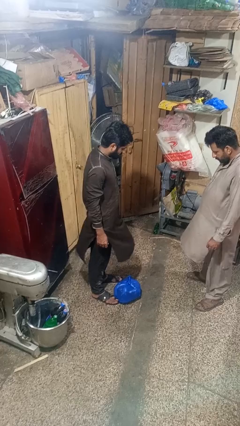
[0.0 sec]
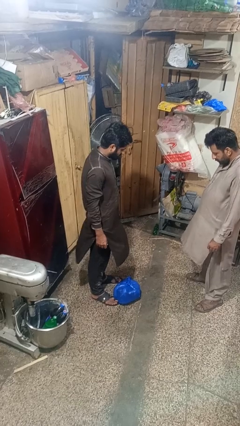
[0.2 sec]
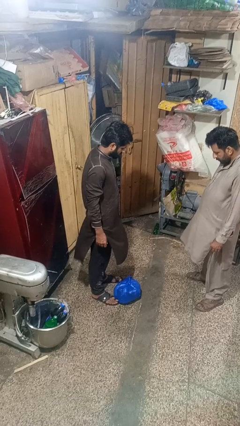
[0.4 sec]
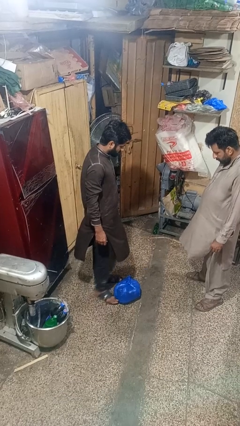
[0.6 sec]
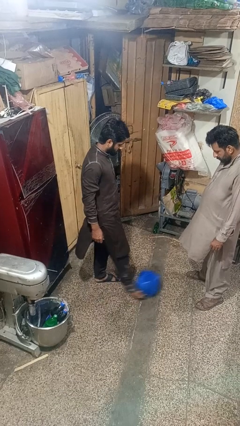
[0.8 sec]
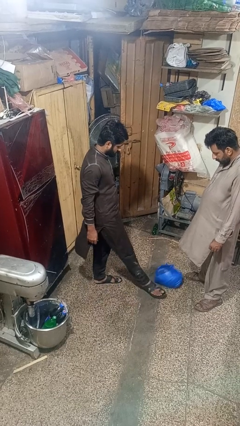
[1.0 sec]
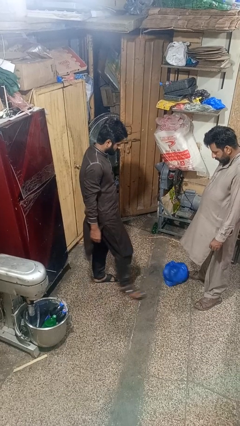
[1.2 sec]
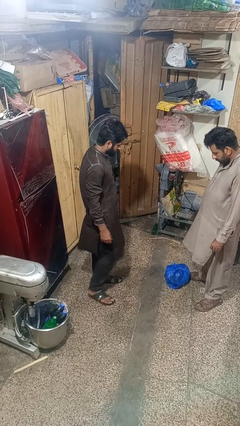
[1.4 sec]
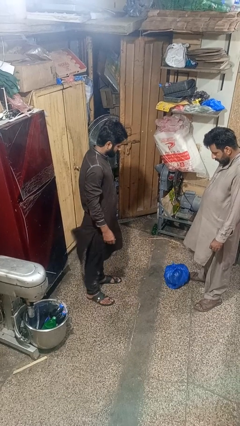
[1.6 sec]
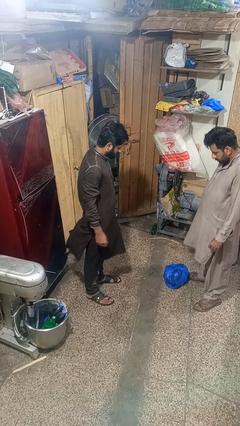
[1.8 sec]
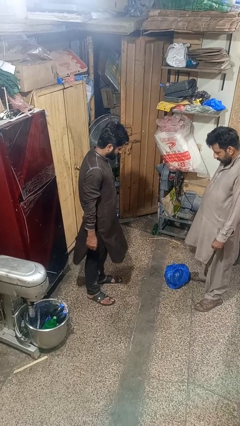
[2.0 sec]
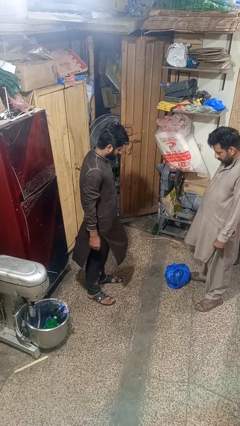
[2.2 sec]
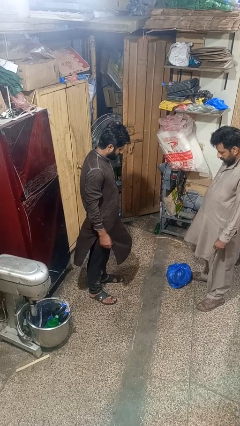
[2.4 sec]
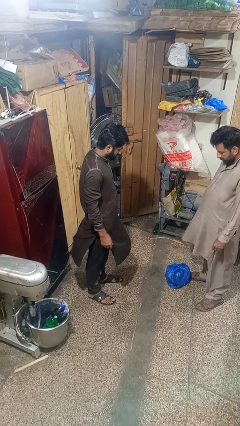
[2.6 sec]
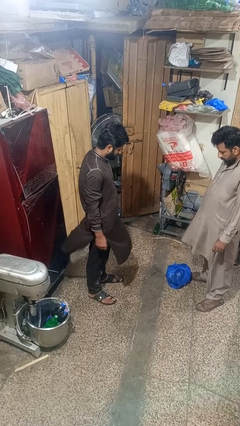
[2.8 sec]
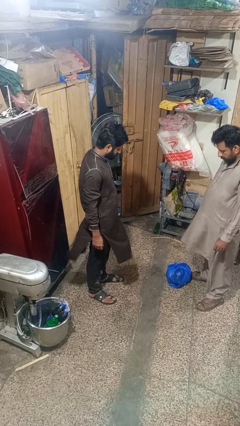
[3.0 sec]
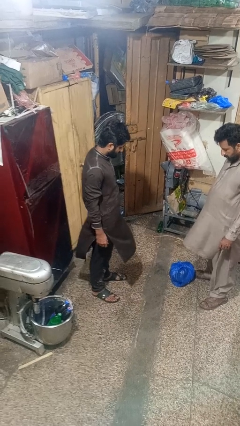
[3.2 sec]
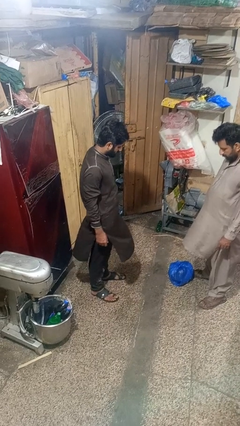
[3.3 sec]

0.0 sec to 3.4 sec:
person kicks object to person

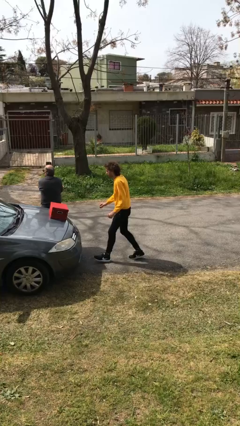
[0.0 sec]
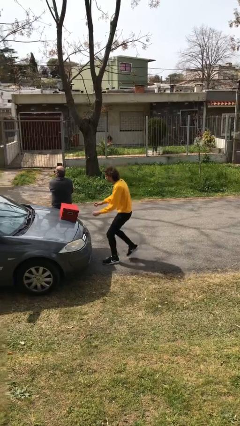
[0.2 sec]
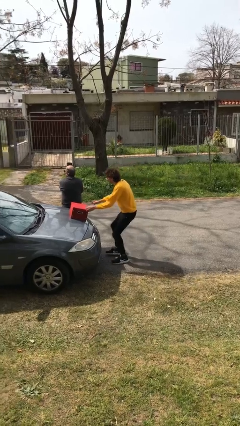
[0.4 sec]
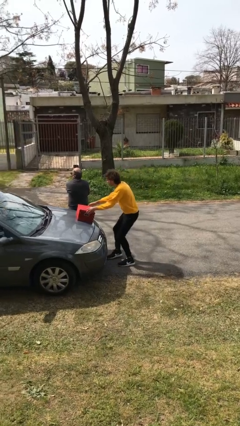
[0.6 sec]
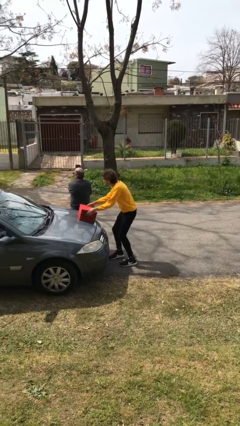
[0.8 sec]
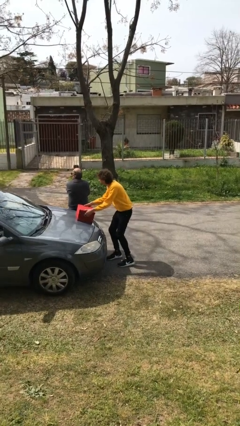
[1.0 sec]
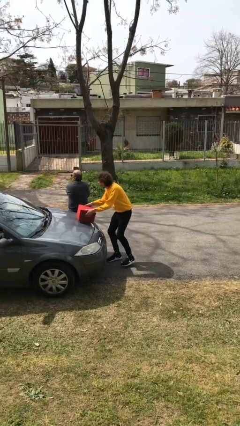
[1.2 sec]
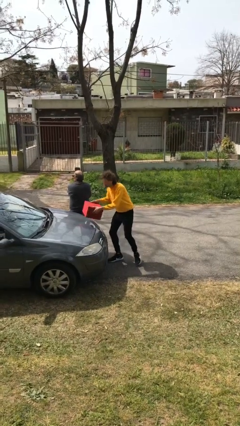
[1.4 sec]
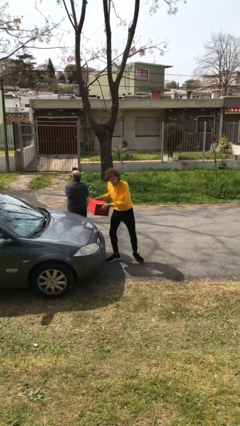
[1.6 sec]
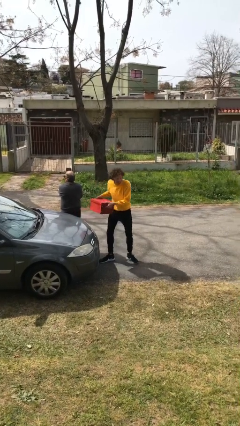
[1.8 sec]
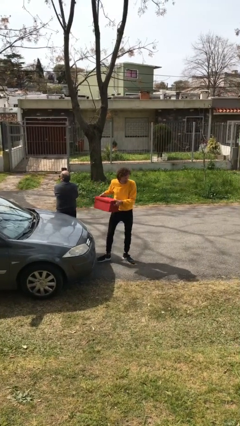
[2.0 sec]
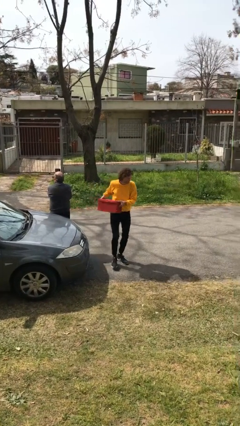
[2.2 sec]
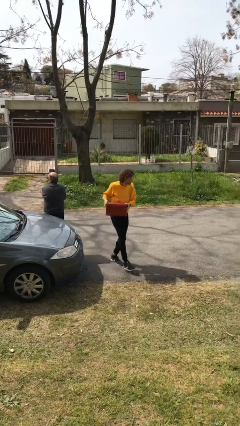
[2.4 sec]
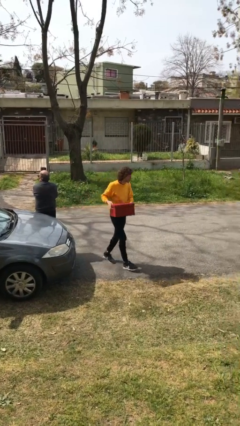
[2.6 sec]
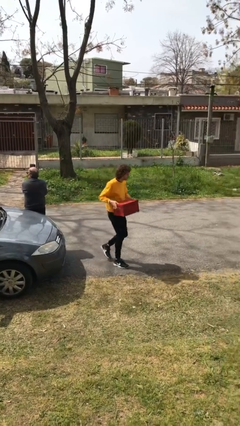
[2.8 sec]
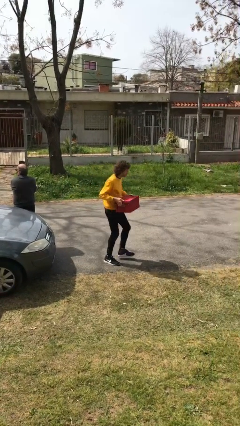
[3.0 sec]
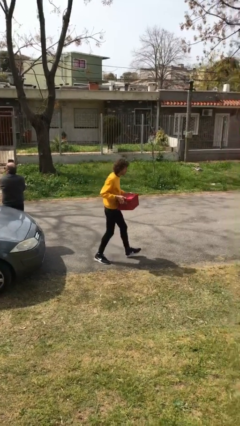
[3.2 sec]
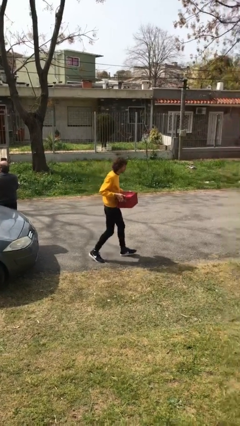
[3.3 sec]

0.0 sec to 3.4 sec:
person steals object from person

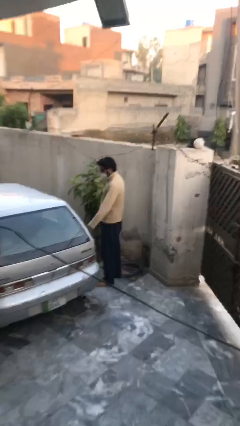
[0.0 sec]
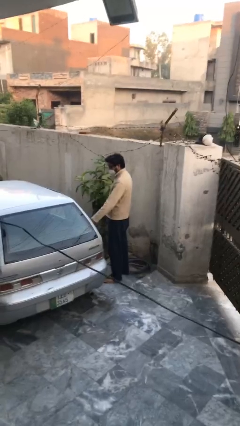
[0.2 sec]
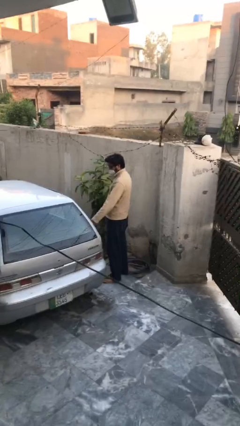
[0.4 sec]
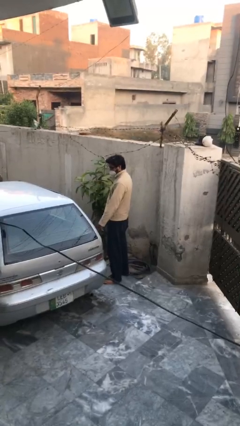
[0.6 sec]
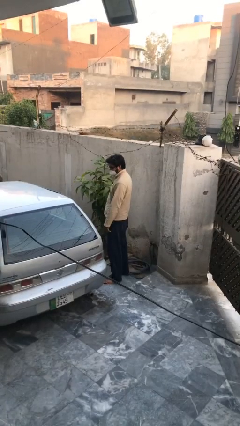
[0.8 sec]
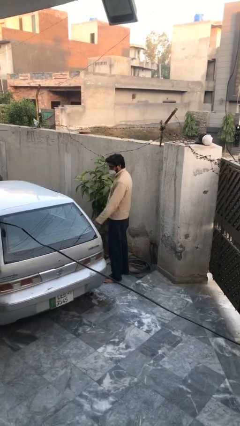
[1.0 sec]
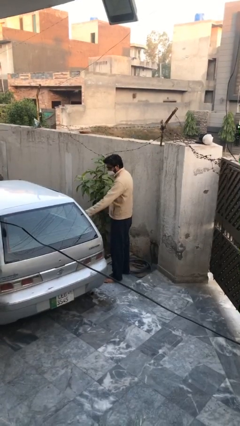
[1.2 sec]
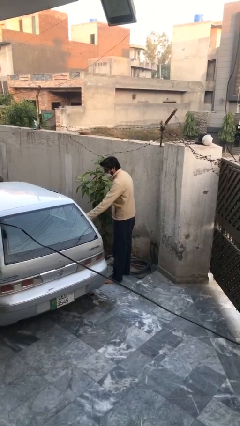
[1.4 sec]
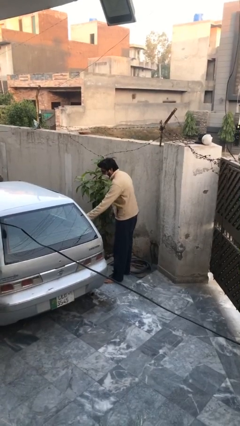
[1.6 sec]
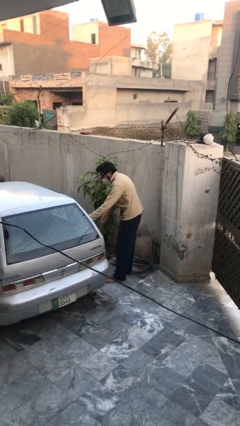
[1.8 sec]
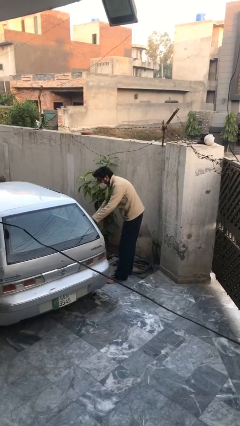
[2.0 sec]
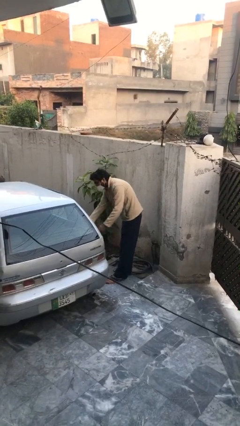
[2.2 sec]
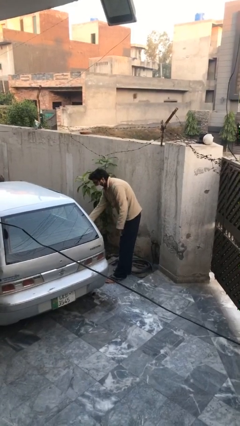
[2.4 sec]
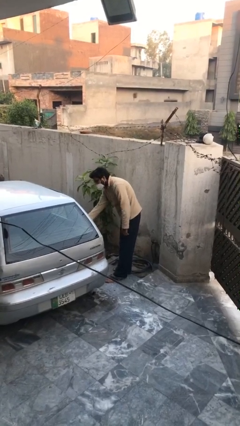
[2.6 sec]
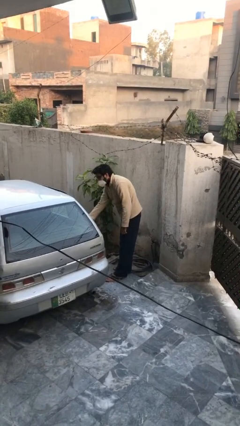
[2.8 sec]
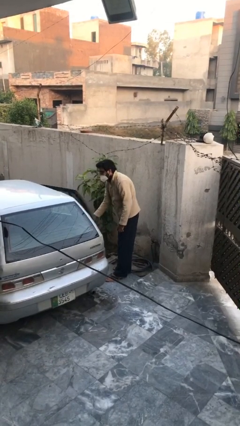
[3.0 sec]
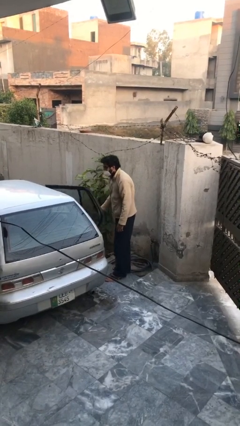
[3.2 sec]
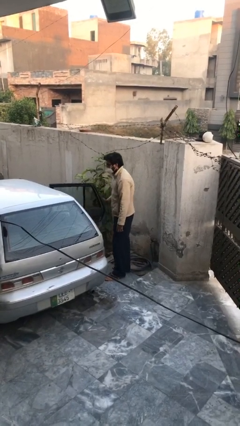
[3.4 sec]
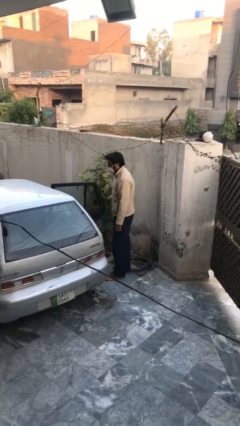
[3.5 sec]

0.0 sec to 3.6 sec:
person opens car door

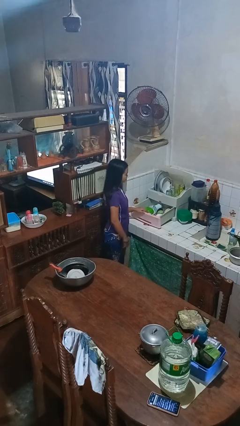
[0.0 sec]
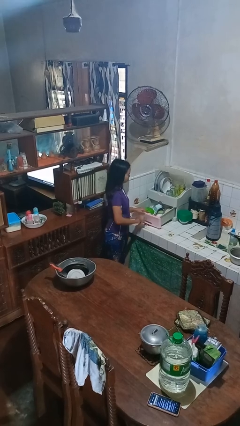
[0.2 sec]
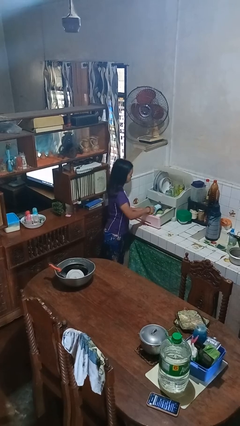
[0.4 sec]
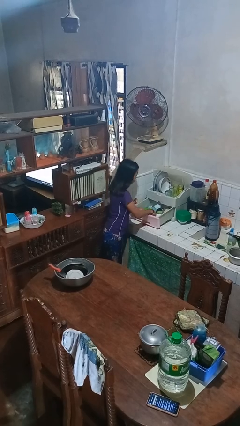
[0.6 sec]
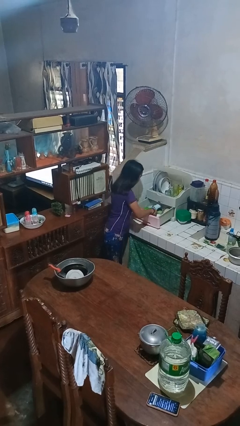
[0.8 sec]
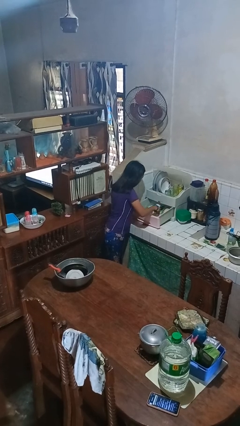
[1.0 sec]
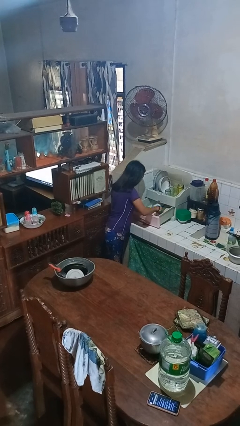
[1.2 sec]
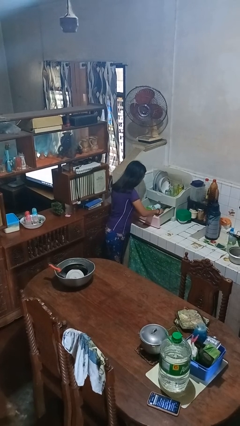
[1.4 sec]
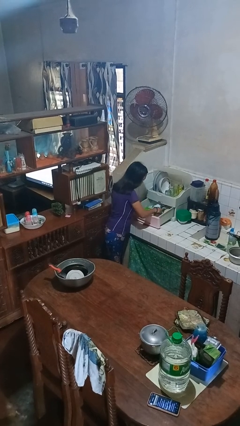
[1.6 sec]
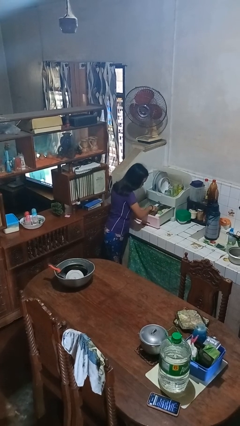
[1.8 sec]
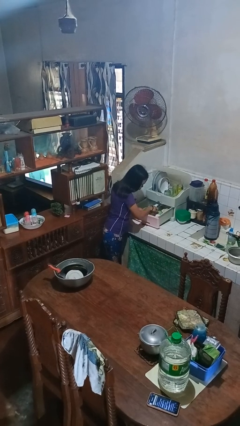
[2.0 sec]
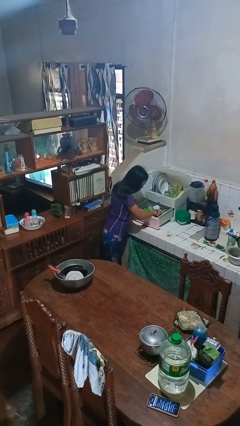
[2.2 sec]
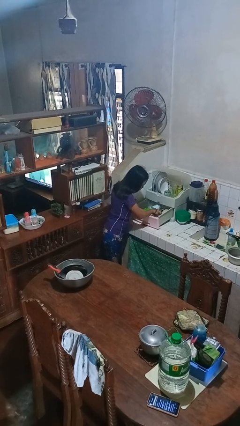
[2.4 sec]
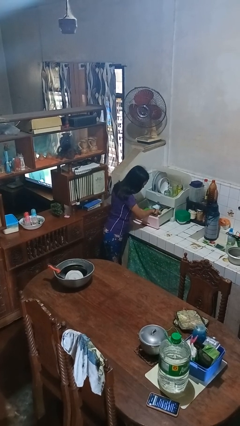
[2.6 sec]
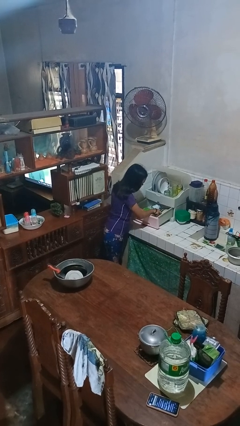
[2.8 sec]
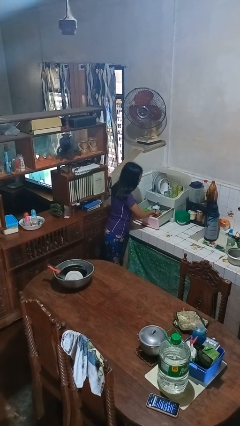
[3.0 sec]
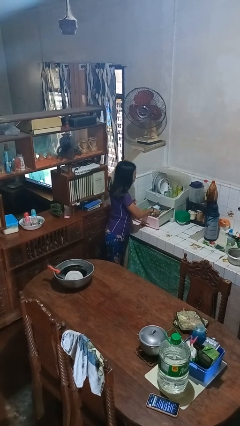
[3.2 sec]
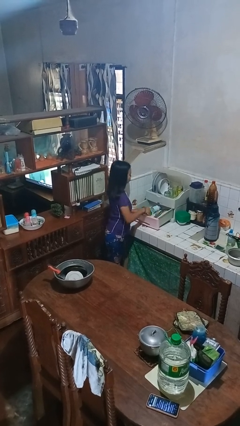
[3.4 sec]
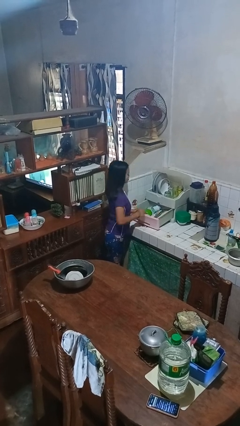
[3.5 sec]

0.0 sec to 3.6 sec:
person searches in kitchen drawer

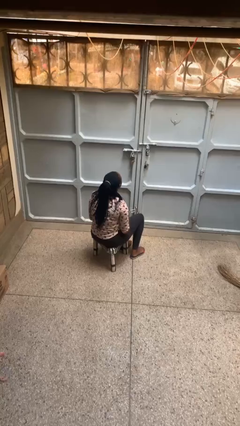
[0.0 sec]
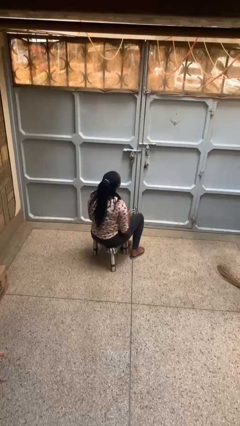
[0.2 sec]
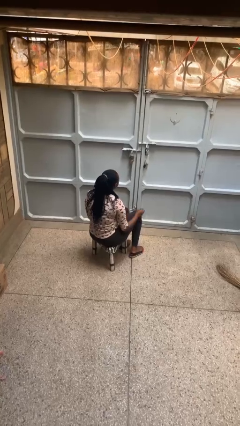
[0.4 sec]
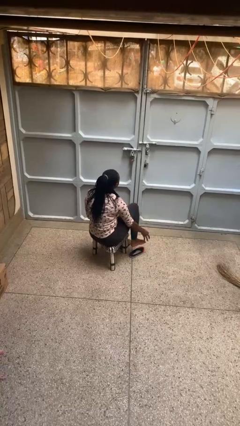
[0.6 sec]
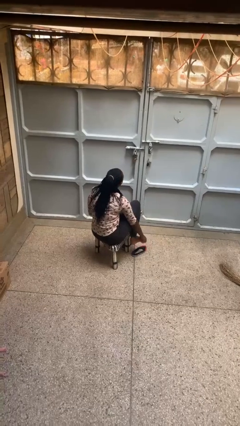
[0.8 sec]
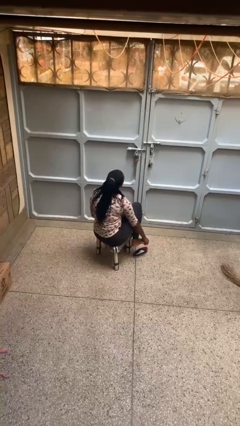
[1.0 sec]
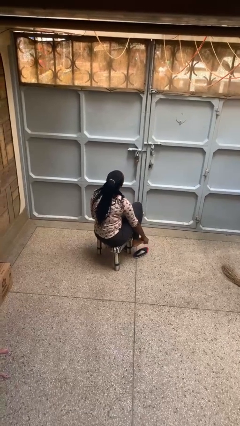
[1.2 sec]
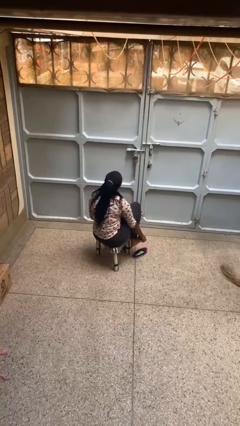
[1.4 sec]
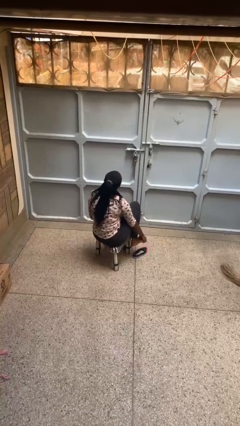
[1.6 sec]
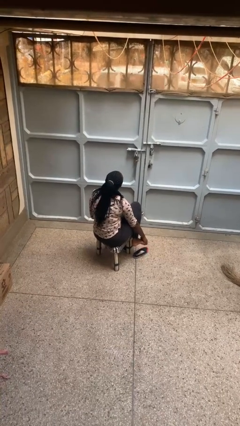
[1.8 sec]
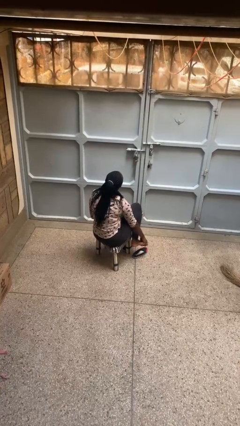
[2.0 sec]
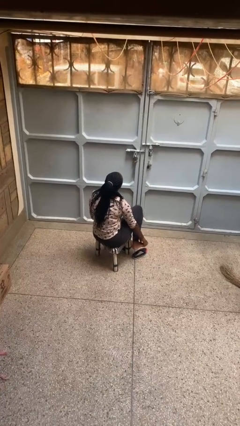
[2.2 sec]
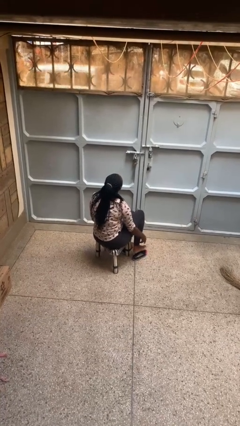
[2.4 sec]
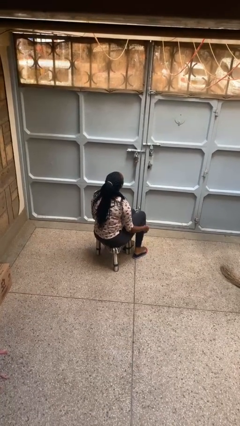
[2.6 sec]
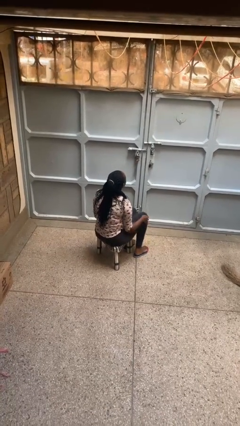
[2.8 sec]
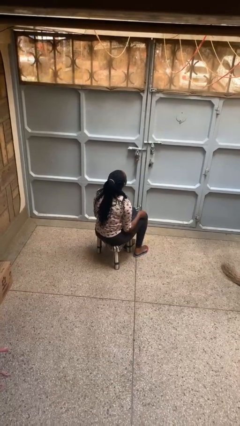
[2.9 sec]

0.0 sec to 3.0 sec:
person rubs foot

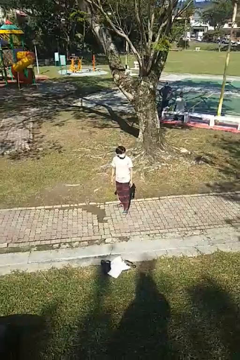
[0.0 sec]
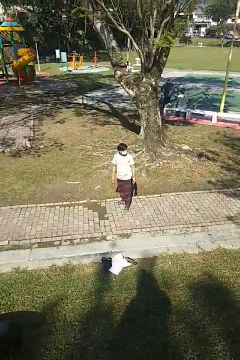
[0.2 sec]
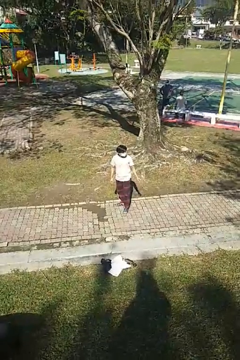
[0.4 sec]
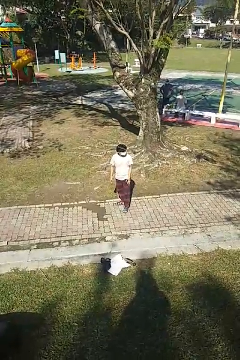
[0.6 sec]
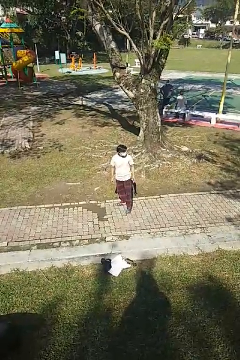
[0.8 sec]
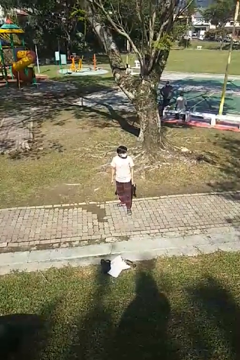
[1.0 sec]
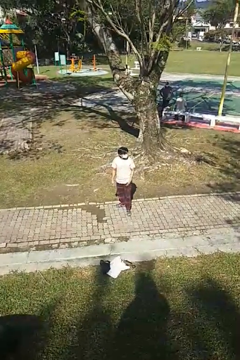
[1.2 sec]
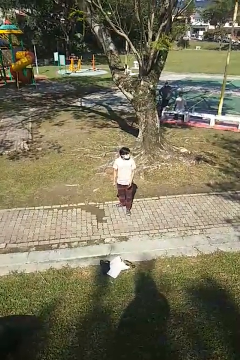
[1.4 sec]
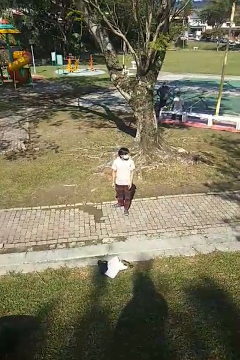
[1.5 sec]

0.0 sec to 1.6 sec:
person slaps hands on thighs
